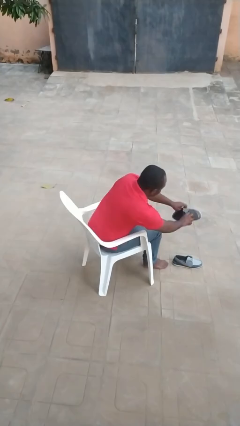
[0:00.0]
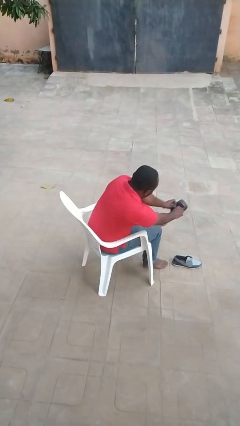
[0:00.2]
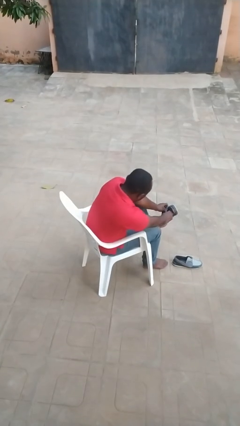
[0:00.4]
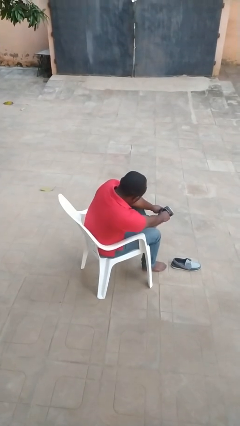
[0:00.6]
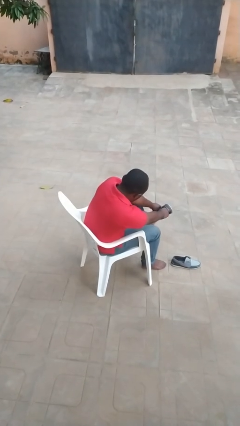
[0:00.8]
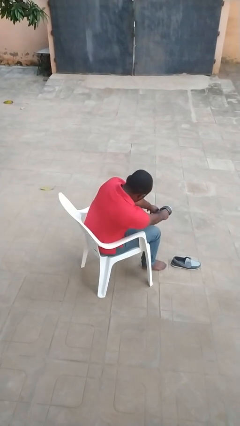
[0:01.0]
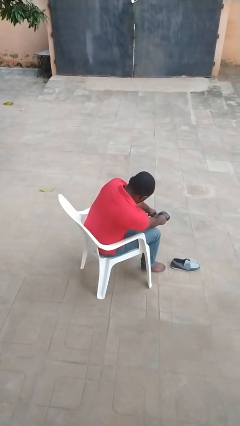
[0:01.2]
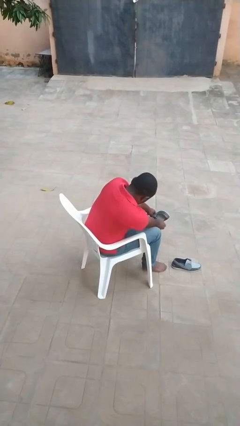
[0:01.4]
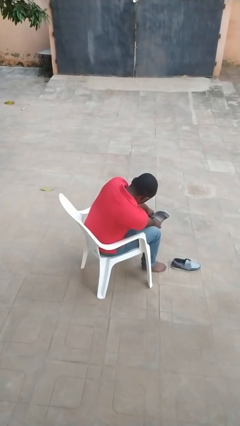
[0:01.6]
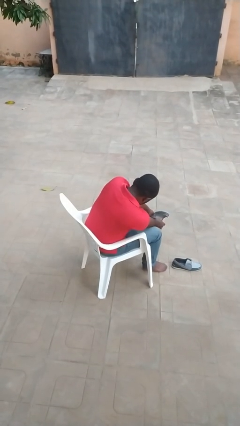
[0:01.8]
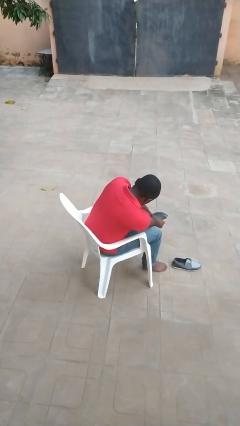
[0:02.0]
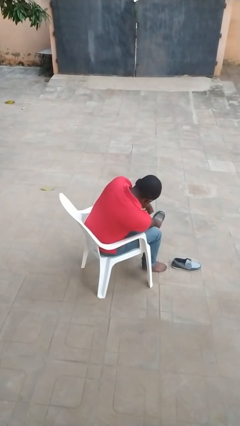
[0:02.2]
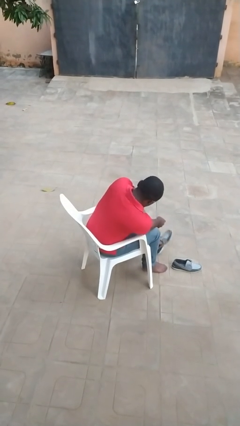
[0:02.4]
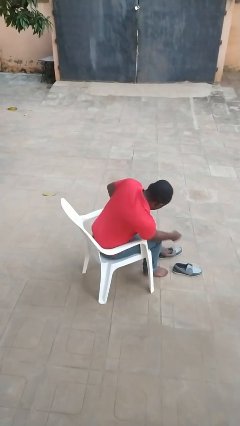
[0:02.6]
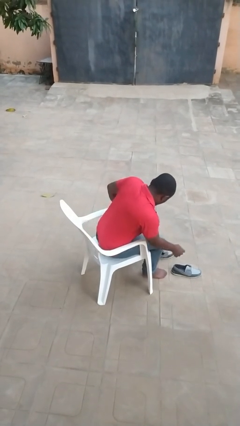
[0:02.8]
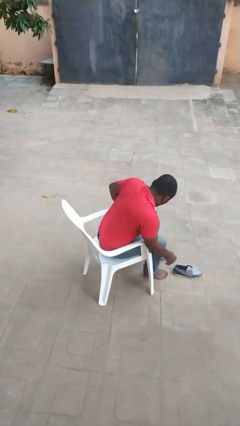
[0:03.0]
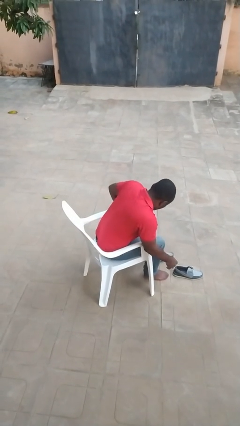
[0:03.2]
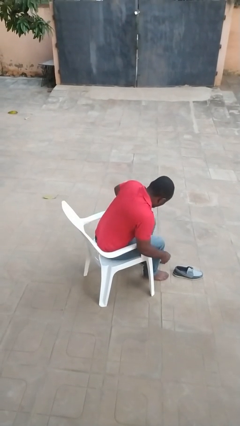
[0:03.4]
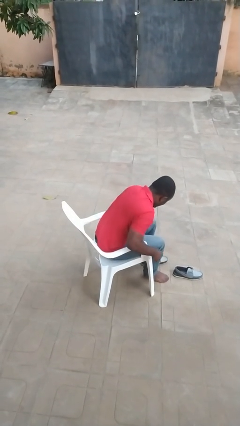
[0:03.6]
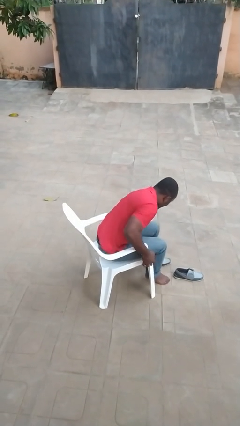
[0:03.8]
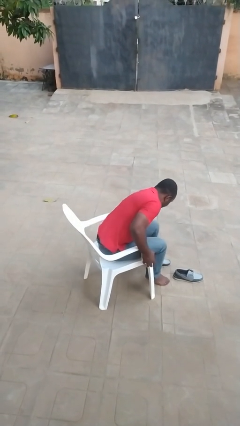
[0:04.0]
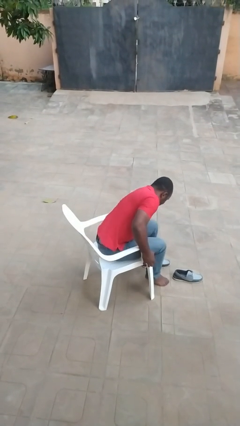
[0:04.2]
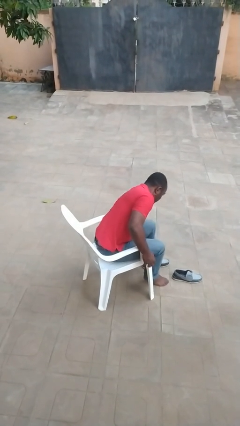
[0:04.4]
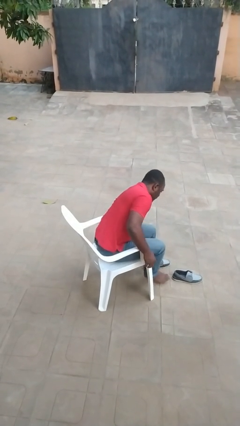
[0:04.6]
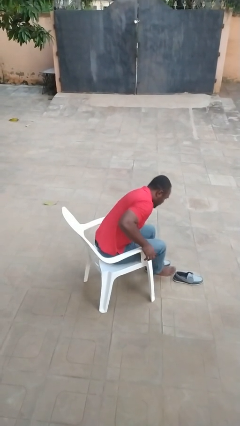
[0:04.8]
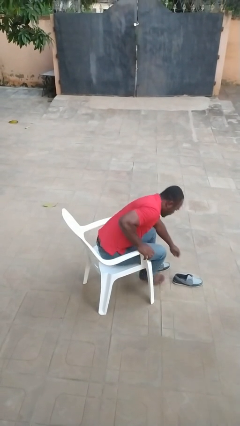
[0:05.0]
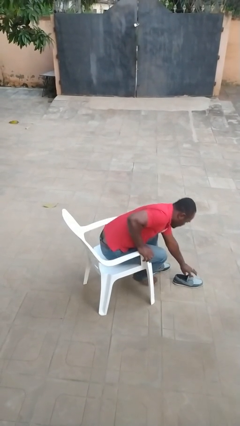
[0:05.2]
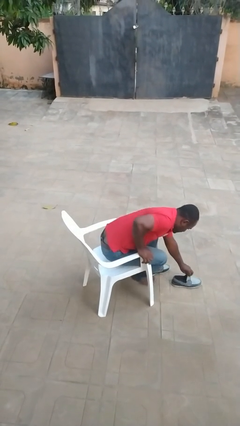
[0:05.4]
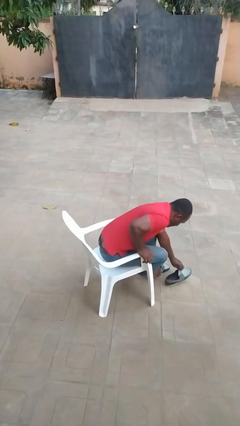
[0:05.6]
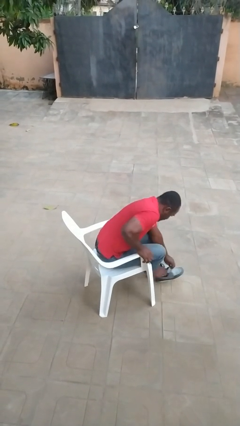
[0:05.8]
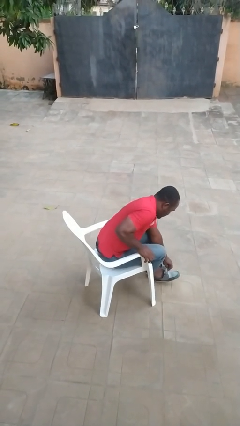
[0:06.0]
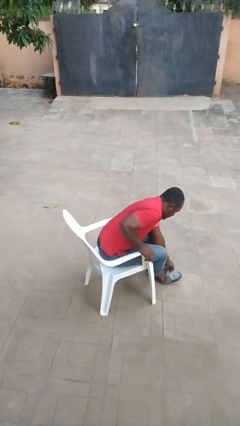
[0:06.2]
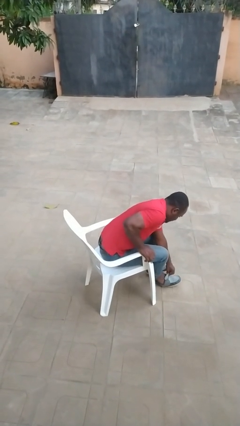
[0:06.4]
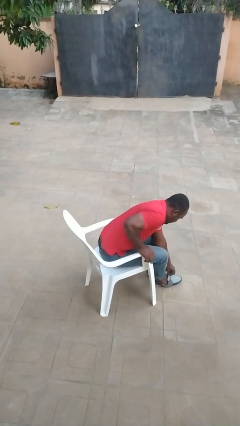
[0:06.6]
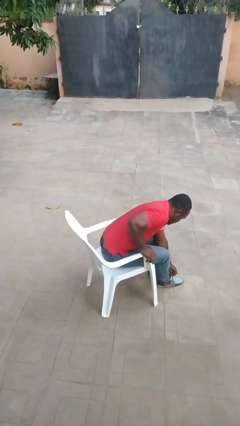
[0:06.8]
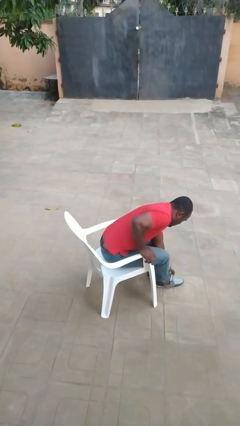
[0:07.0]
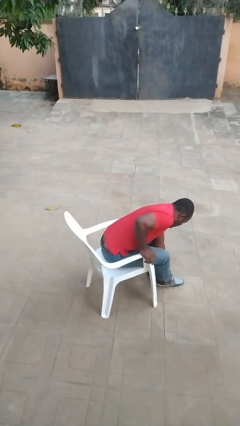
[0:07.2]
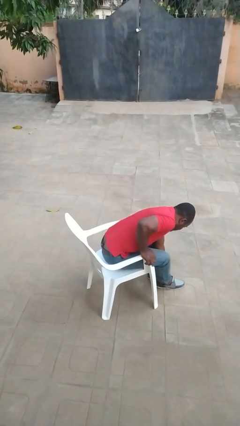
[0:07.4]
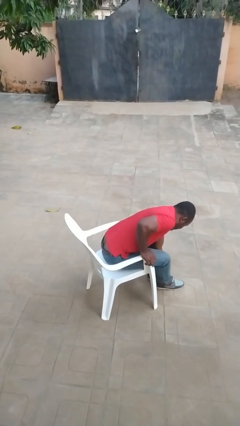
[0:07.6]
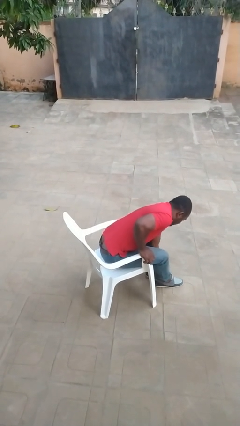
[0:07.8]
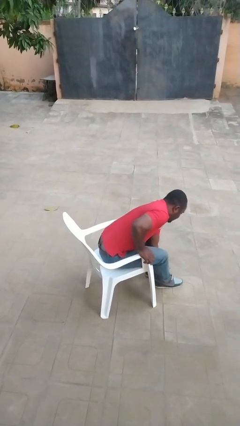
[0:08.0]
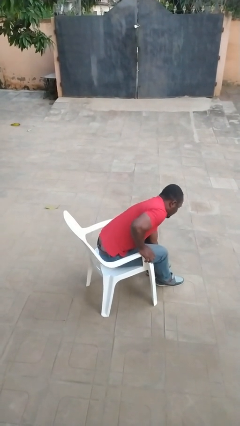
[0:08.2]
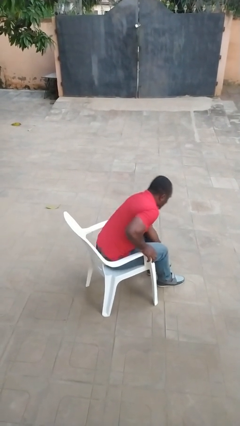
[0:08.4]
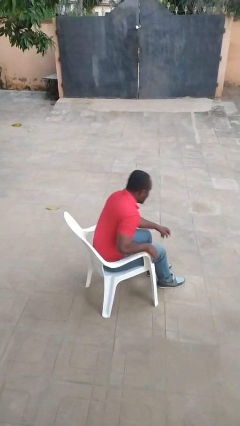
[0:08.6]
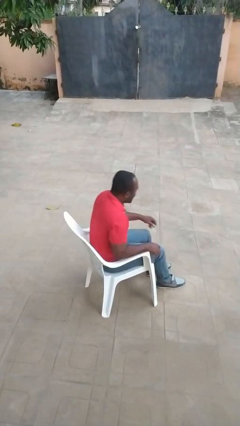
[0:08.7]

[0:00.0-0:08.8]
person puts on shoes

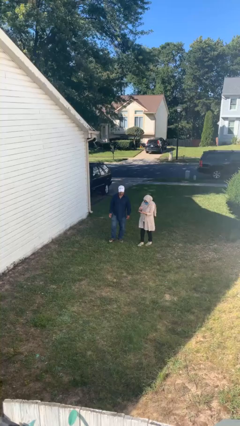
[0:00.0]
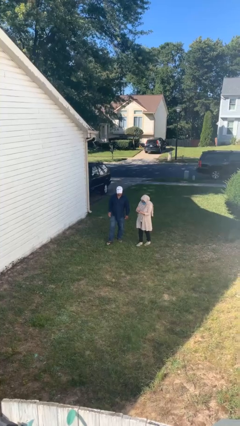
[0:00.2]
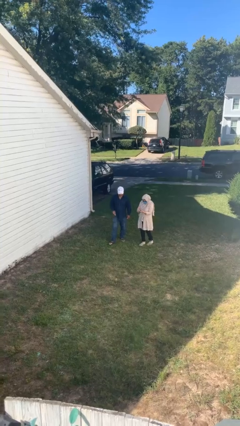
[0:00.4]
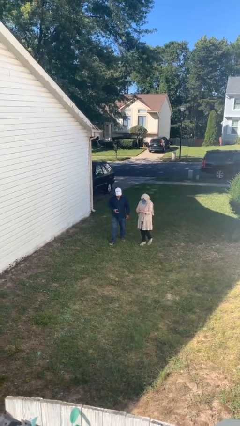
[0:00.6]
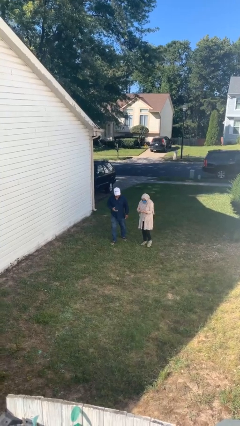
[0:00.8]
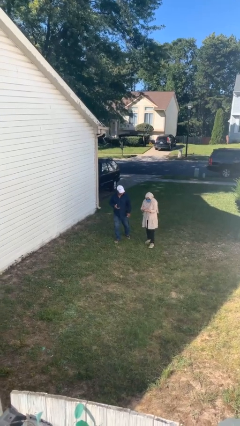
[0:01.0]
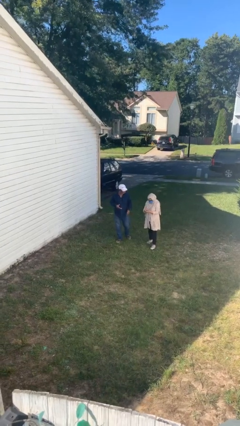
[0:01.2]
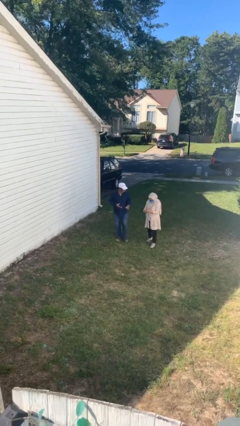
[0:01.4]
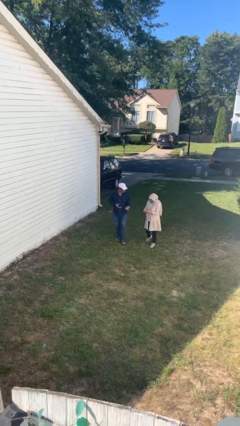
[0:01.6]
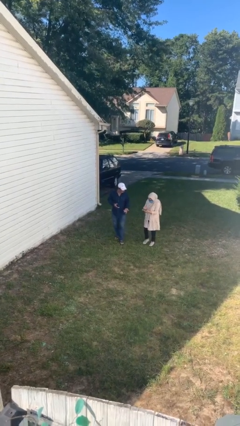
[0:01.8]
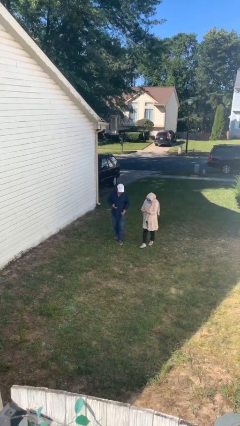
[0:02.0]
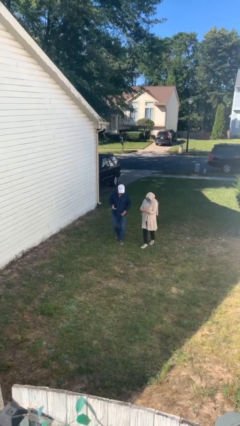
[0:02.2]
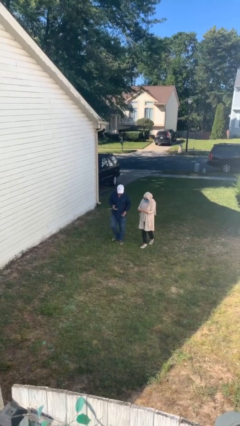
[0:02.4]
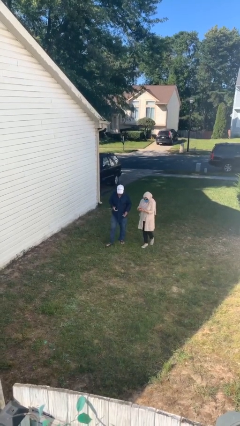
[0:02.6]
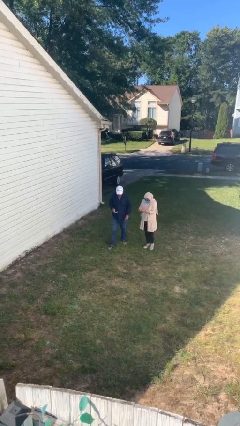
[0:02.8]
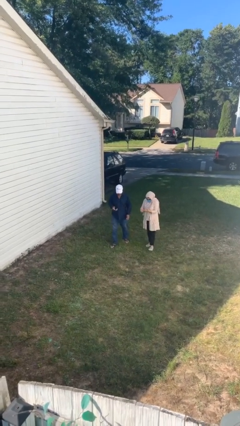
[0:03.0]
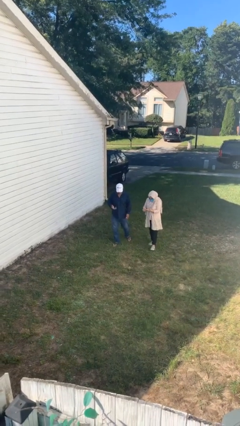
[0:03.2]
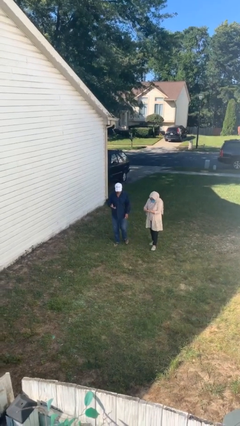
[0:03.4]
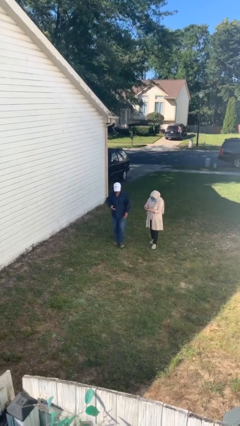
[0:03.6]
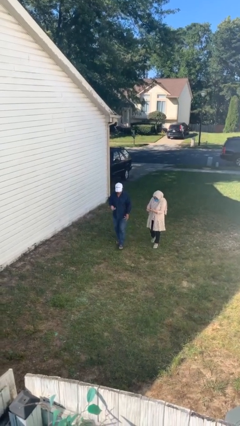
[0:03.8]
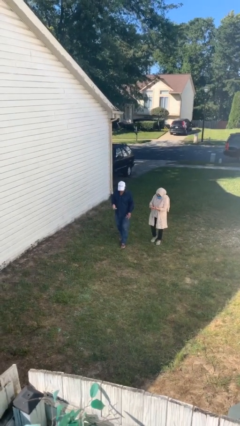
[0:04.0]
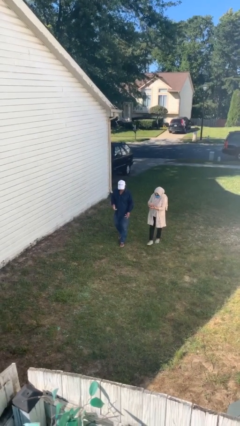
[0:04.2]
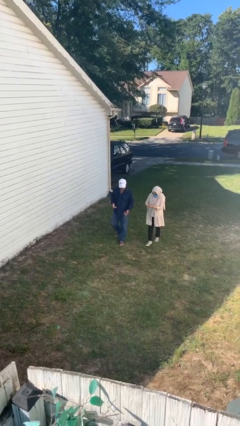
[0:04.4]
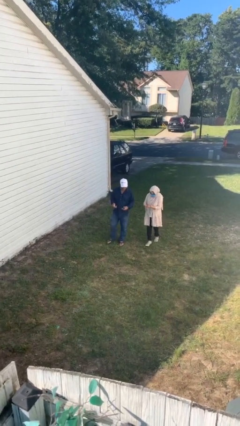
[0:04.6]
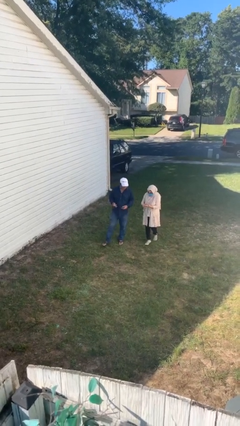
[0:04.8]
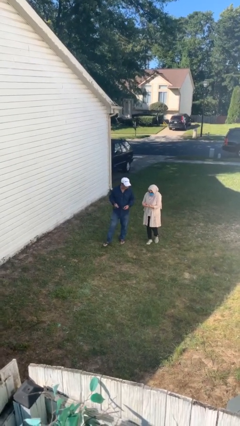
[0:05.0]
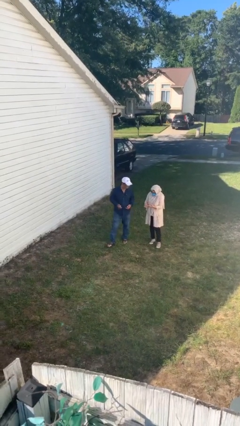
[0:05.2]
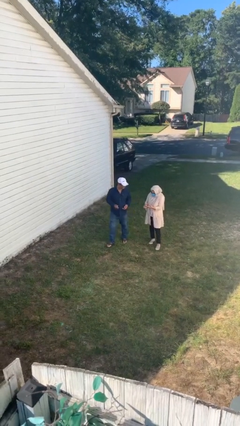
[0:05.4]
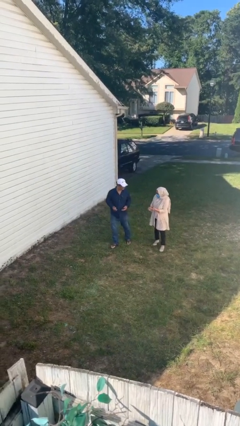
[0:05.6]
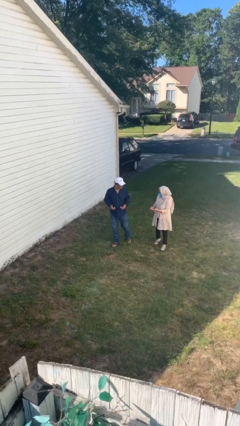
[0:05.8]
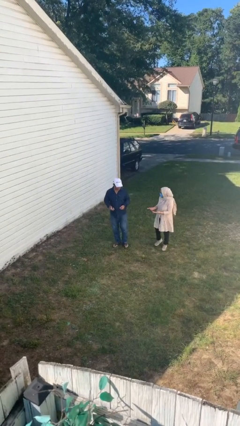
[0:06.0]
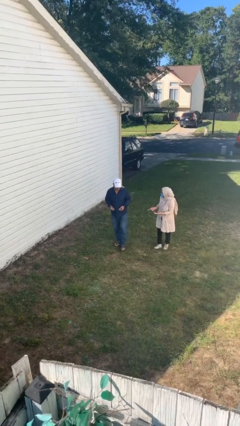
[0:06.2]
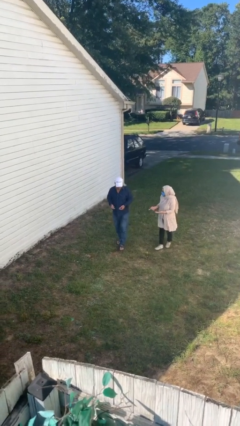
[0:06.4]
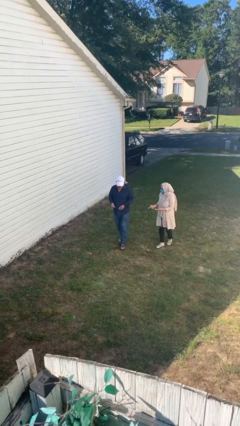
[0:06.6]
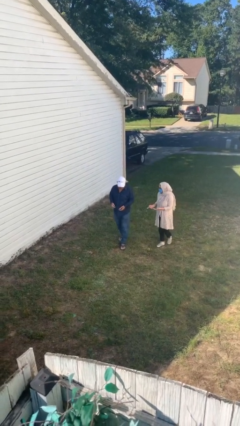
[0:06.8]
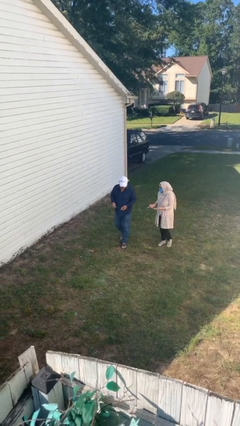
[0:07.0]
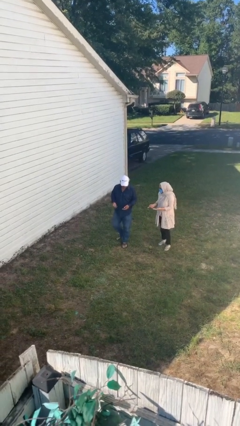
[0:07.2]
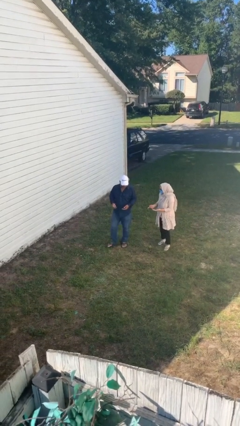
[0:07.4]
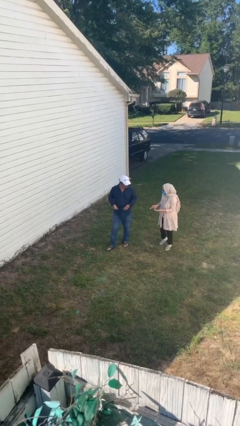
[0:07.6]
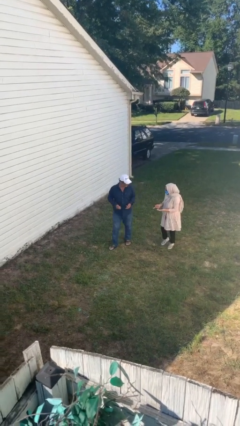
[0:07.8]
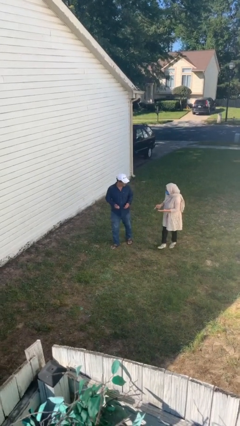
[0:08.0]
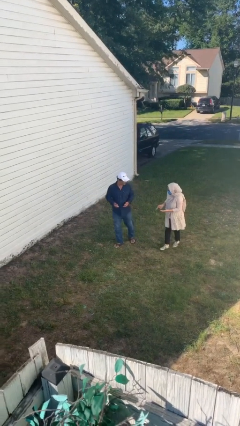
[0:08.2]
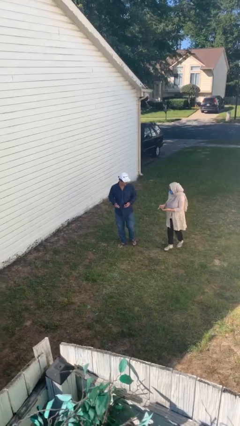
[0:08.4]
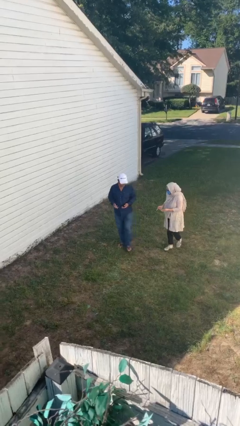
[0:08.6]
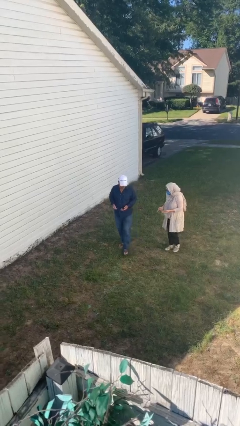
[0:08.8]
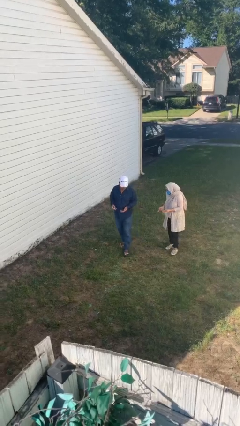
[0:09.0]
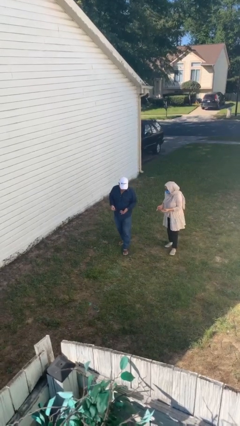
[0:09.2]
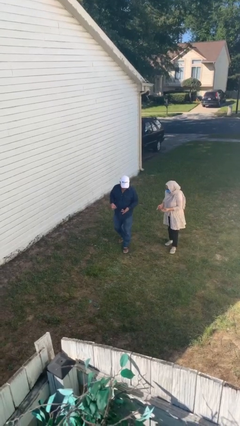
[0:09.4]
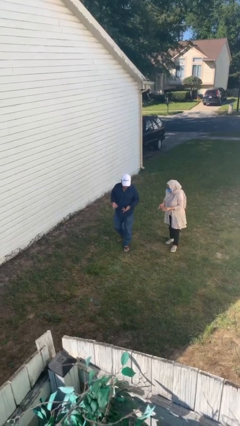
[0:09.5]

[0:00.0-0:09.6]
person talks to person
